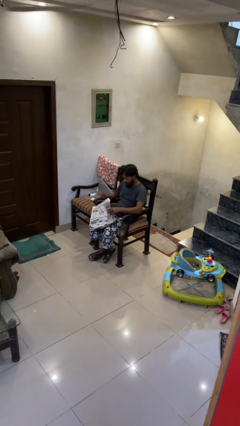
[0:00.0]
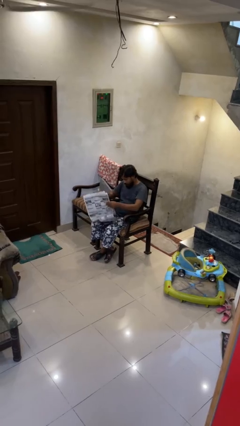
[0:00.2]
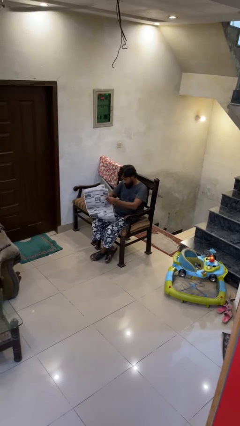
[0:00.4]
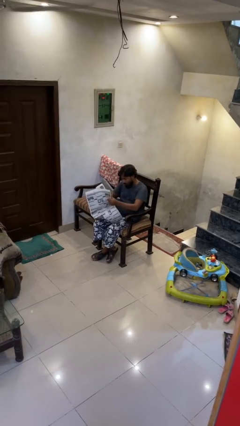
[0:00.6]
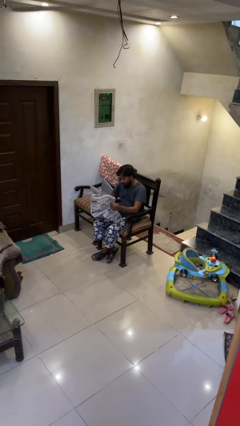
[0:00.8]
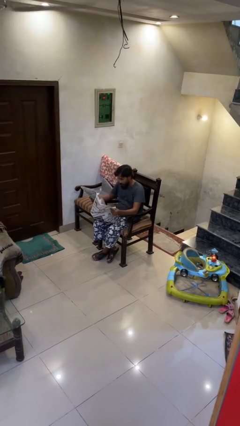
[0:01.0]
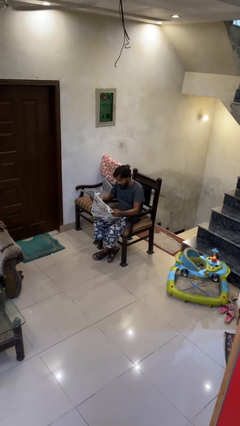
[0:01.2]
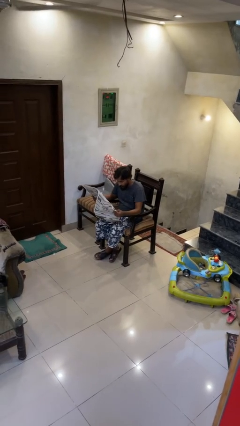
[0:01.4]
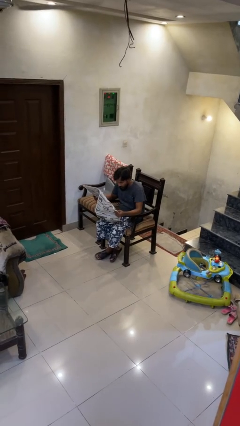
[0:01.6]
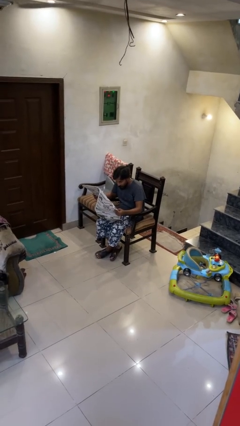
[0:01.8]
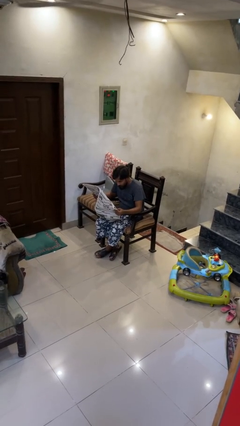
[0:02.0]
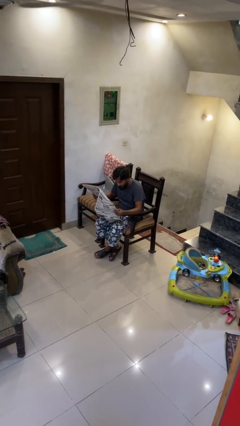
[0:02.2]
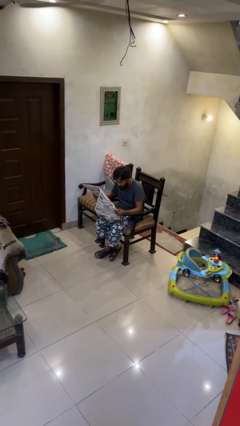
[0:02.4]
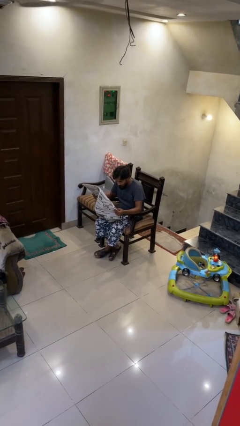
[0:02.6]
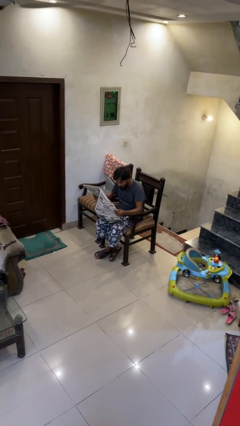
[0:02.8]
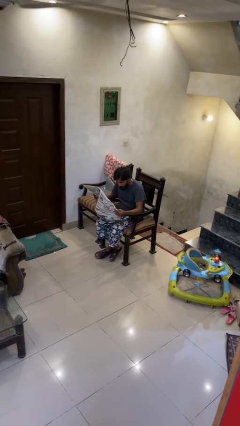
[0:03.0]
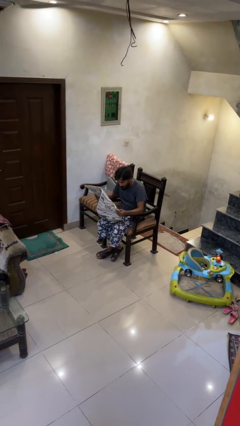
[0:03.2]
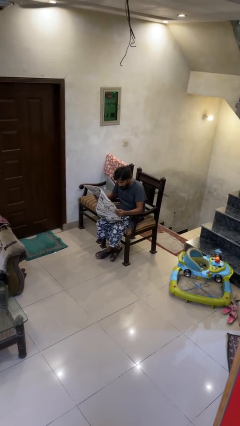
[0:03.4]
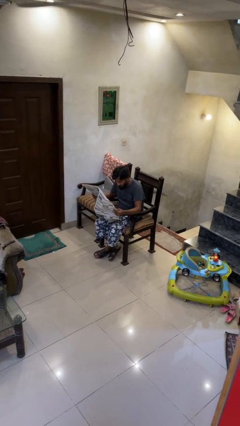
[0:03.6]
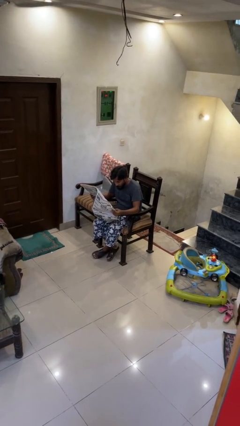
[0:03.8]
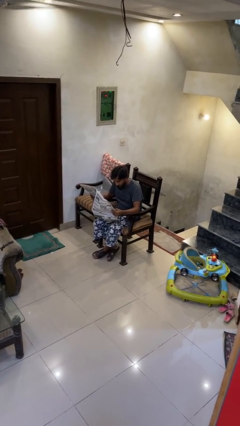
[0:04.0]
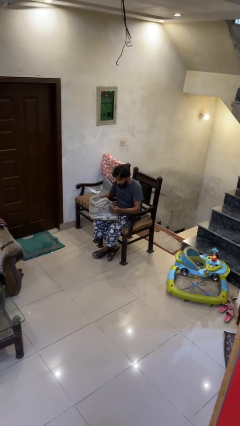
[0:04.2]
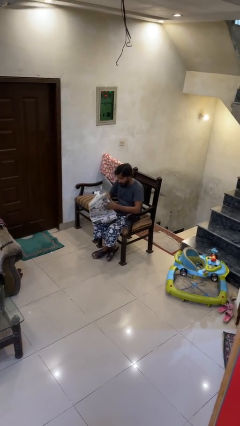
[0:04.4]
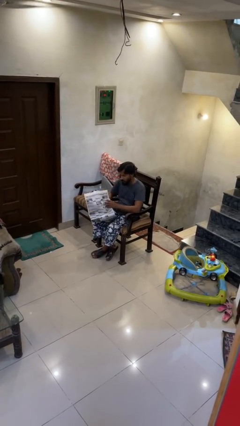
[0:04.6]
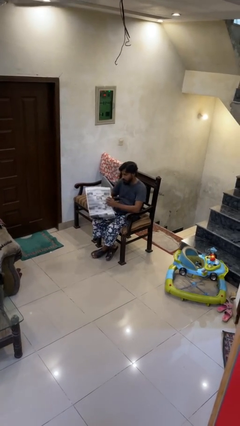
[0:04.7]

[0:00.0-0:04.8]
person reads newspaper

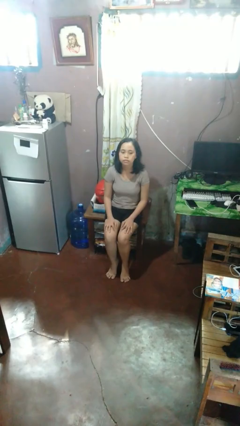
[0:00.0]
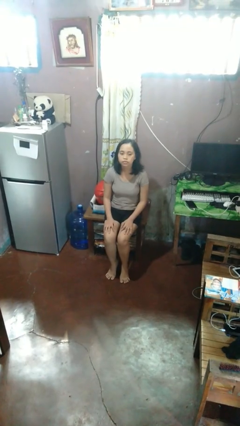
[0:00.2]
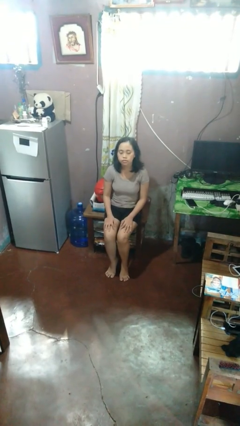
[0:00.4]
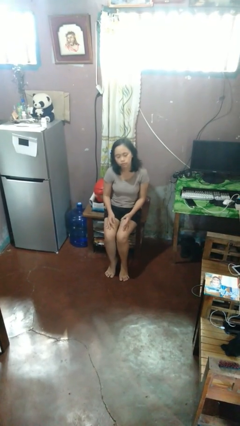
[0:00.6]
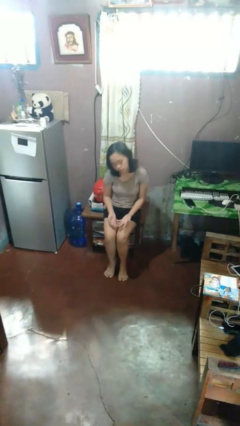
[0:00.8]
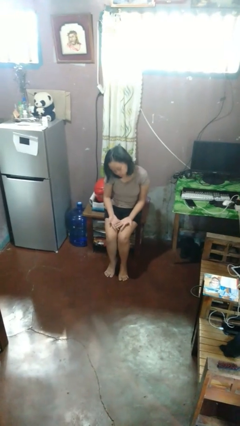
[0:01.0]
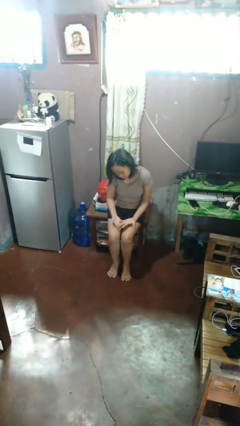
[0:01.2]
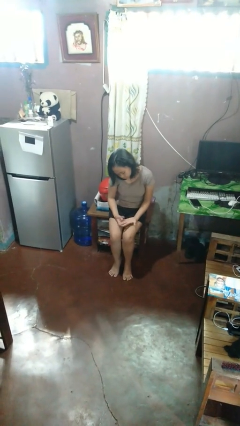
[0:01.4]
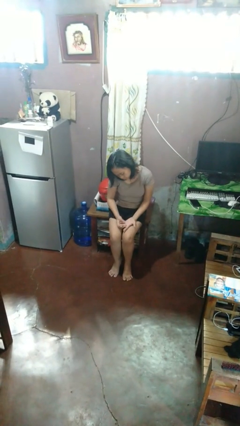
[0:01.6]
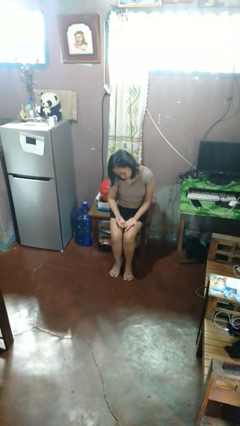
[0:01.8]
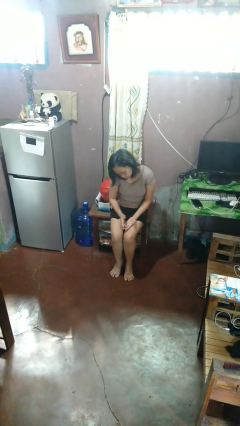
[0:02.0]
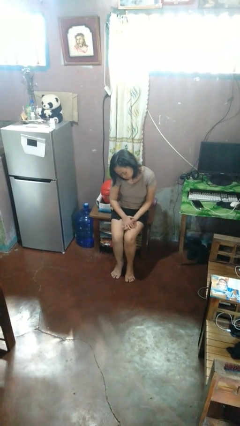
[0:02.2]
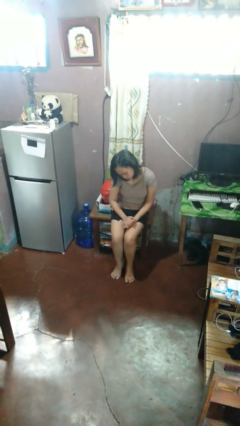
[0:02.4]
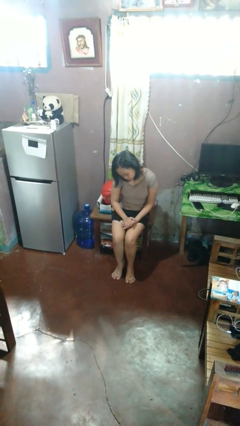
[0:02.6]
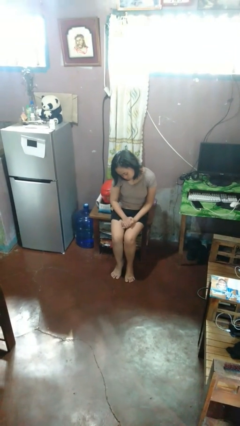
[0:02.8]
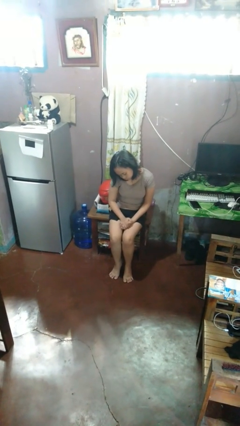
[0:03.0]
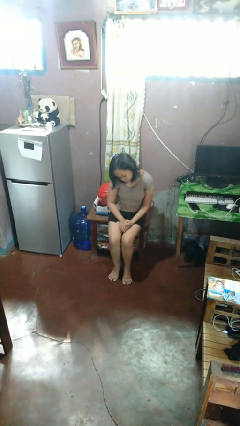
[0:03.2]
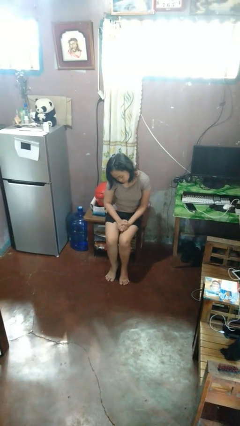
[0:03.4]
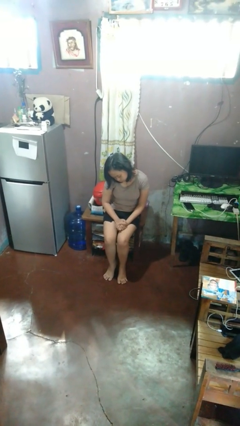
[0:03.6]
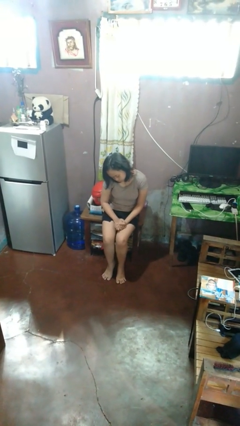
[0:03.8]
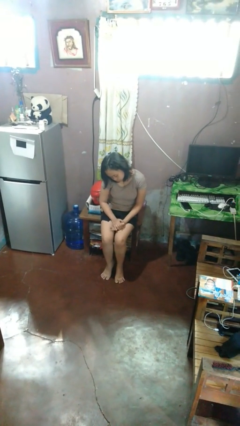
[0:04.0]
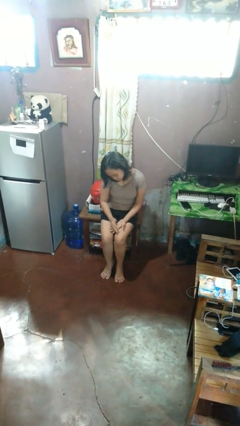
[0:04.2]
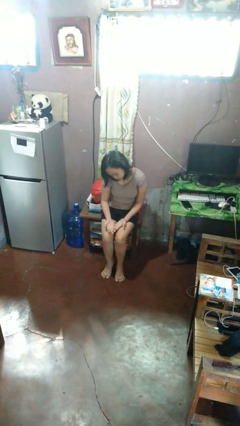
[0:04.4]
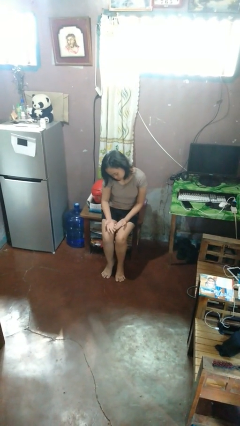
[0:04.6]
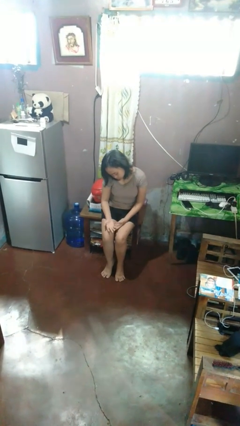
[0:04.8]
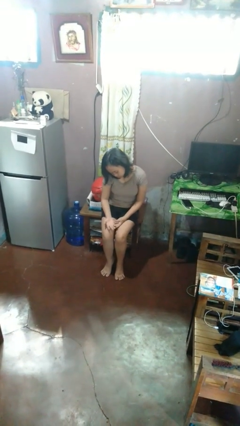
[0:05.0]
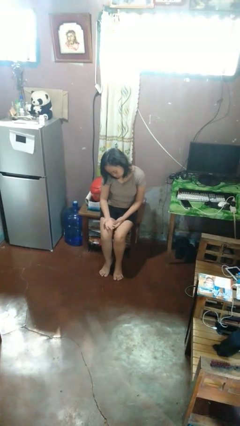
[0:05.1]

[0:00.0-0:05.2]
person looks at hands in lap

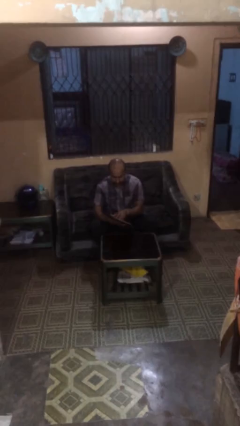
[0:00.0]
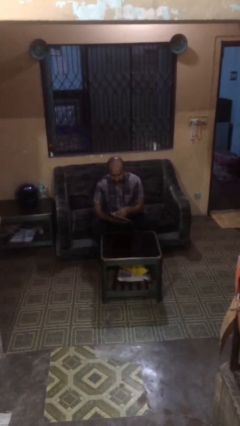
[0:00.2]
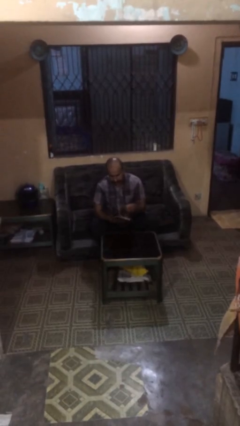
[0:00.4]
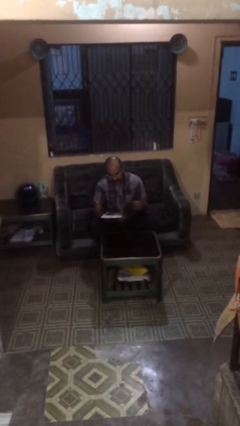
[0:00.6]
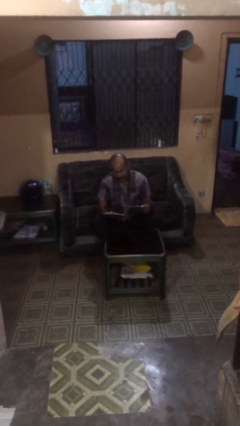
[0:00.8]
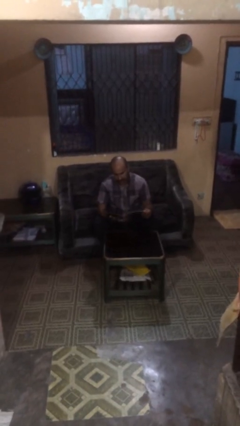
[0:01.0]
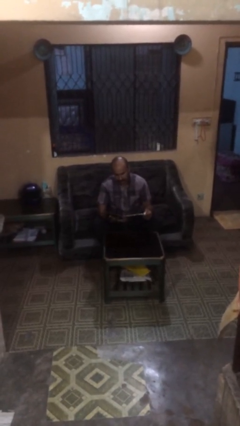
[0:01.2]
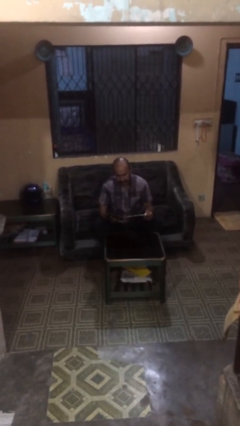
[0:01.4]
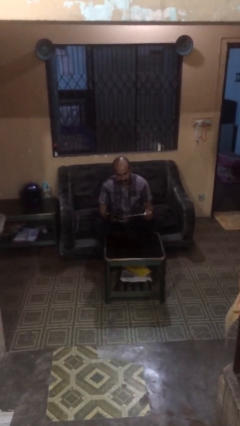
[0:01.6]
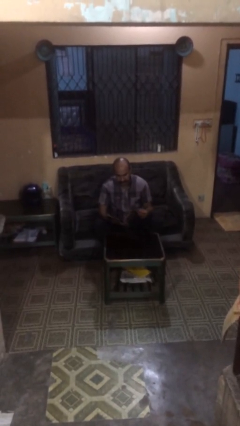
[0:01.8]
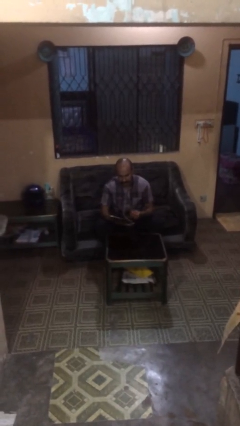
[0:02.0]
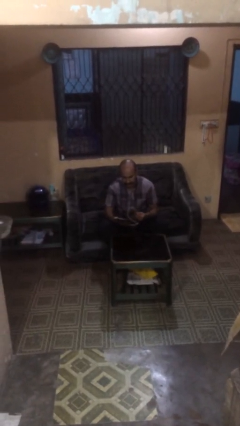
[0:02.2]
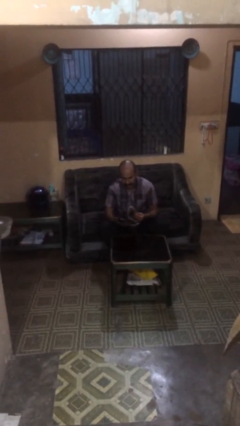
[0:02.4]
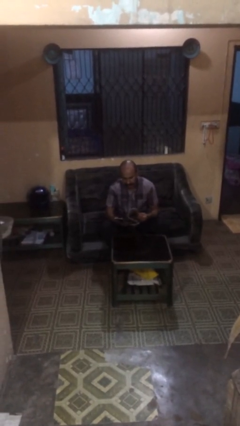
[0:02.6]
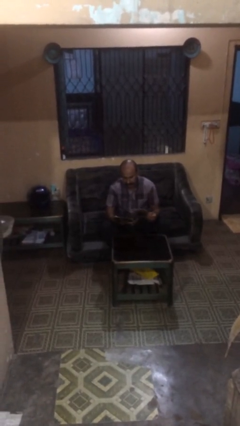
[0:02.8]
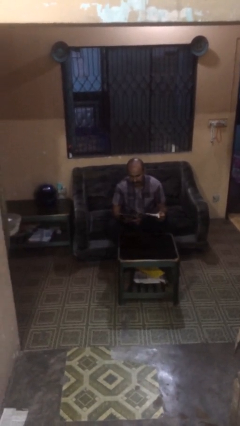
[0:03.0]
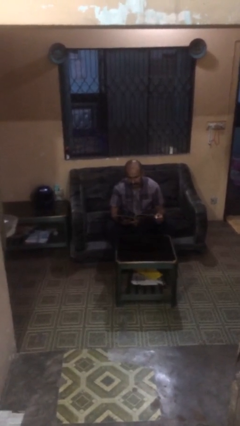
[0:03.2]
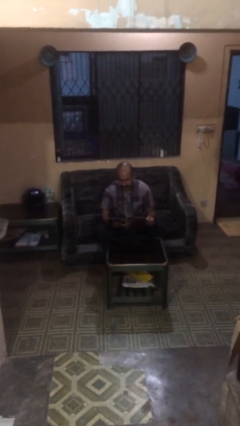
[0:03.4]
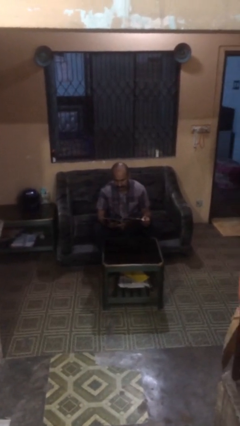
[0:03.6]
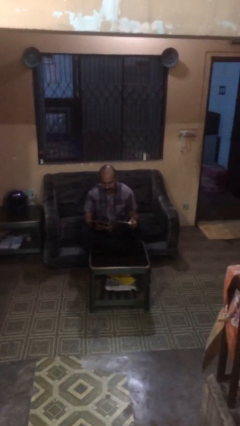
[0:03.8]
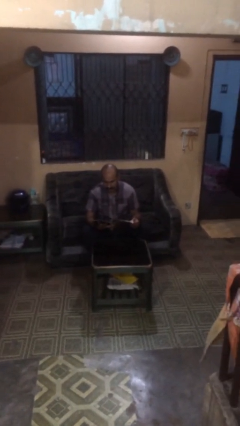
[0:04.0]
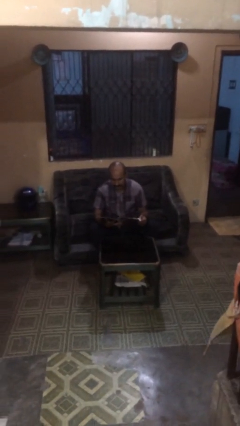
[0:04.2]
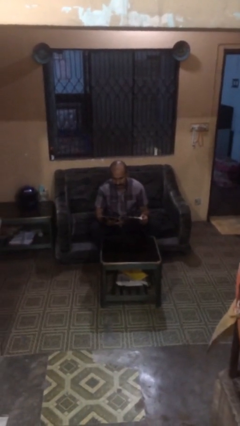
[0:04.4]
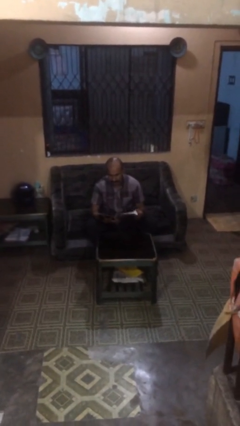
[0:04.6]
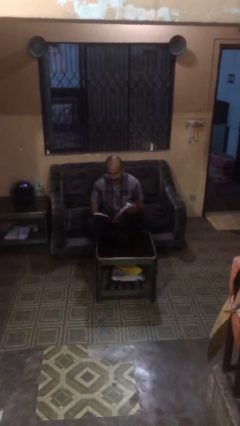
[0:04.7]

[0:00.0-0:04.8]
person reads document

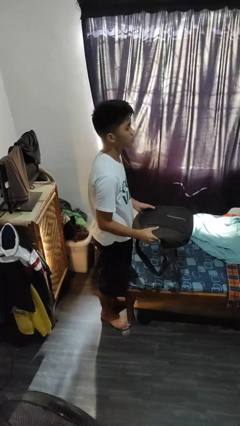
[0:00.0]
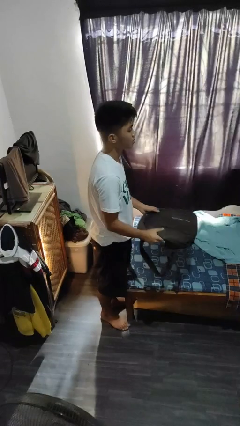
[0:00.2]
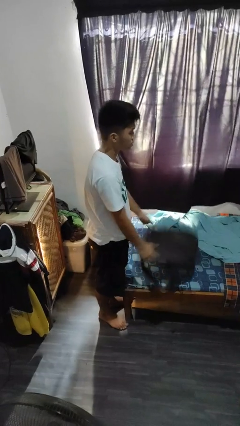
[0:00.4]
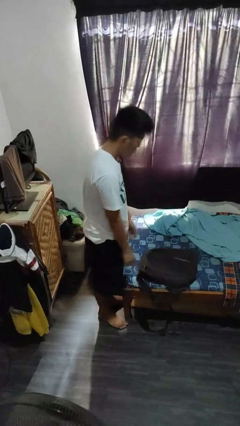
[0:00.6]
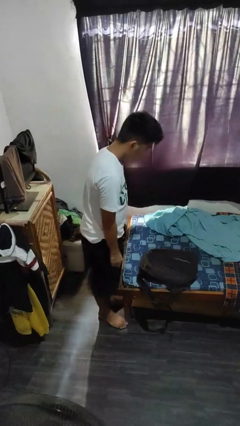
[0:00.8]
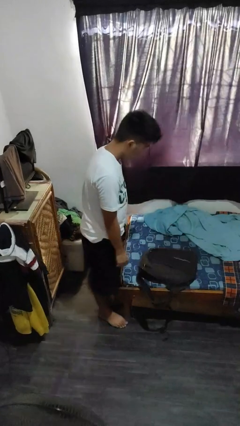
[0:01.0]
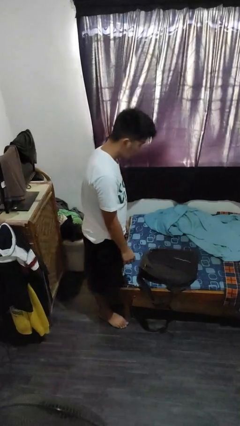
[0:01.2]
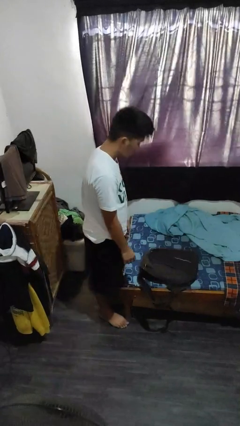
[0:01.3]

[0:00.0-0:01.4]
person puts down object on bed

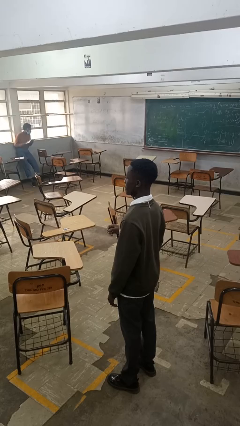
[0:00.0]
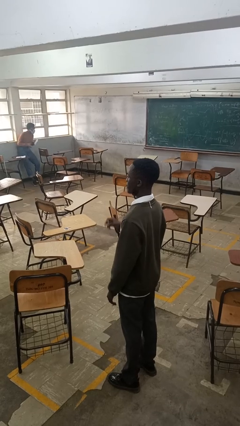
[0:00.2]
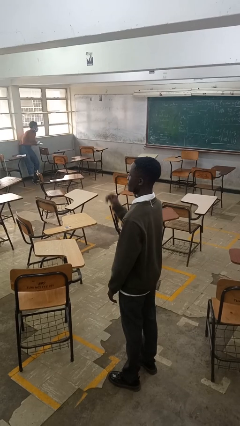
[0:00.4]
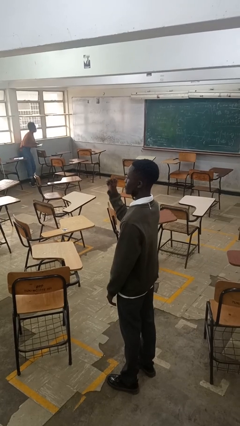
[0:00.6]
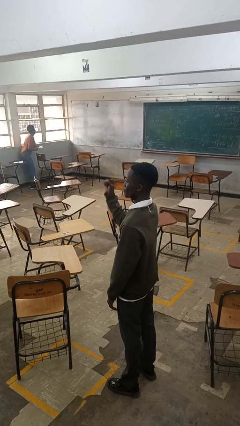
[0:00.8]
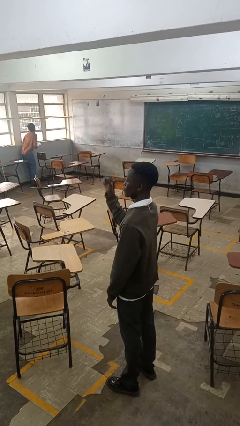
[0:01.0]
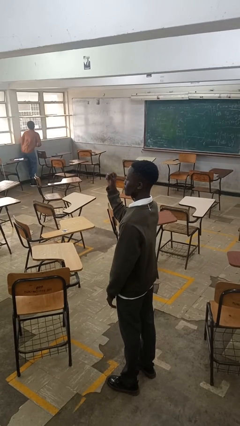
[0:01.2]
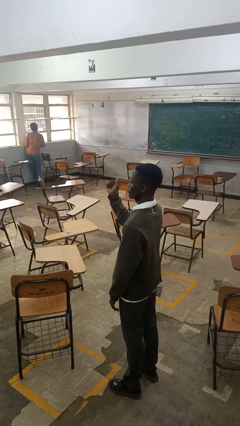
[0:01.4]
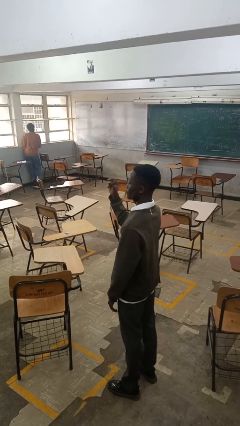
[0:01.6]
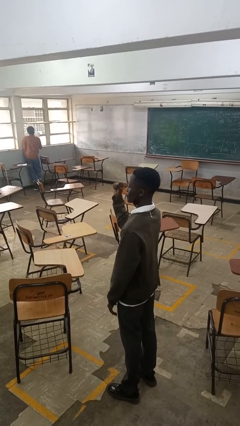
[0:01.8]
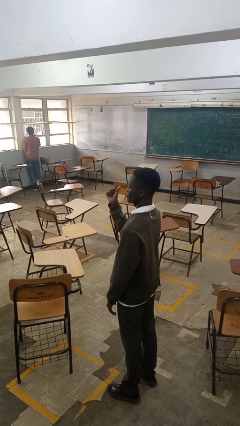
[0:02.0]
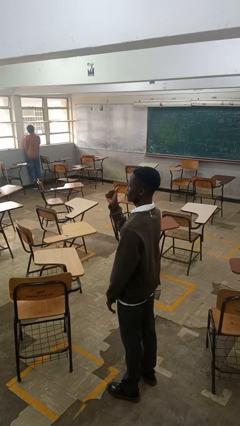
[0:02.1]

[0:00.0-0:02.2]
person snaps fingers
